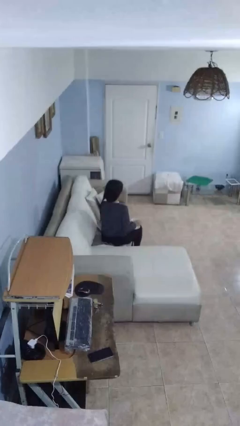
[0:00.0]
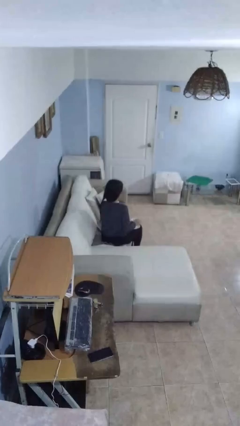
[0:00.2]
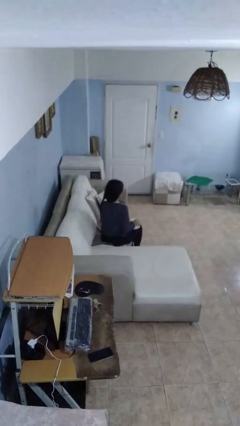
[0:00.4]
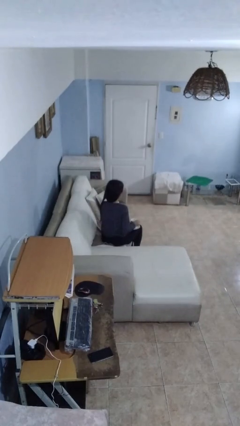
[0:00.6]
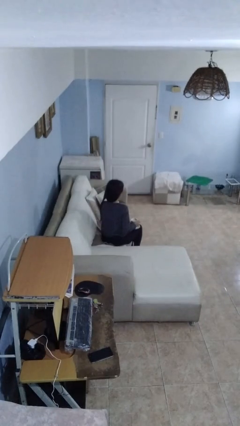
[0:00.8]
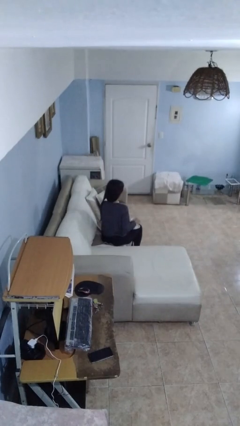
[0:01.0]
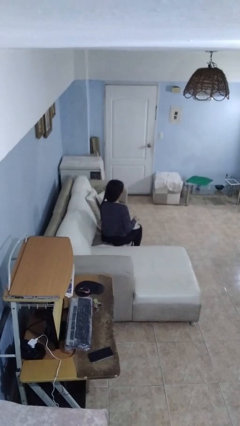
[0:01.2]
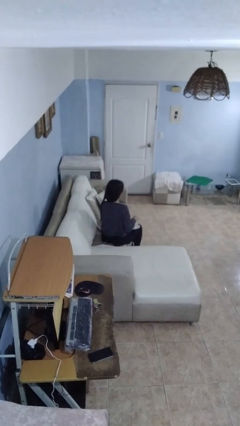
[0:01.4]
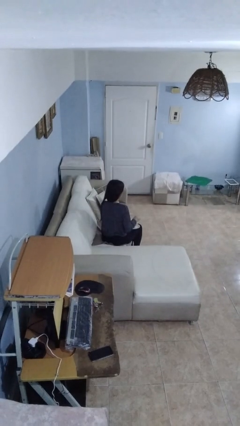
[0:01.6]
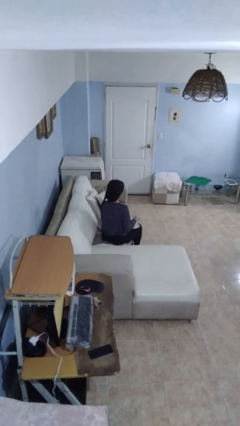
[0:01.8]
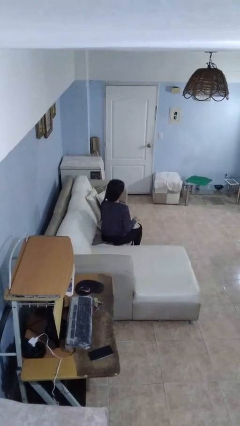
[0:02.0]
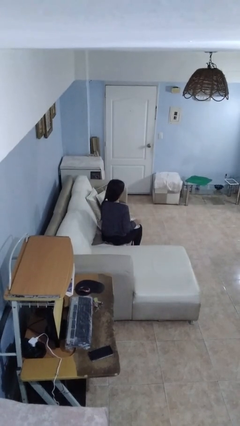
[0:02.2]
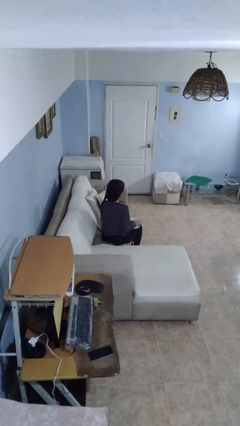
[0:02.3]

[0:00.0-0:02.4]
person stirs mug

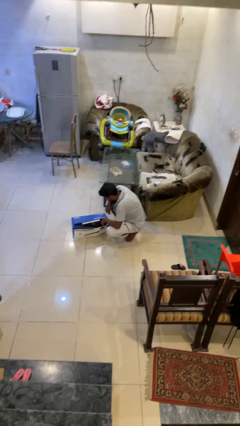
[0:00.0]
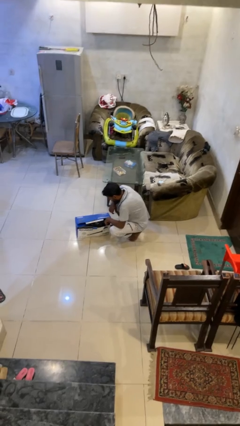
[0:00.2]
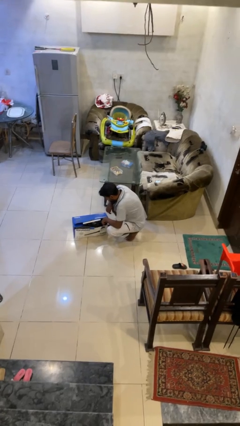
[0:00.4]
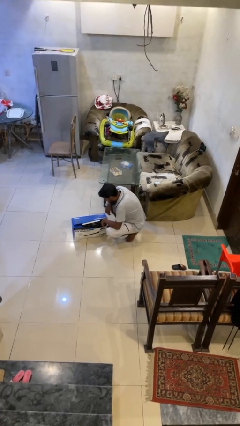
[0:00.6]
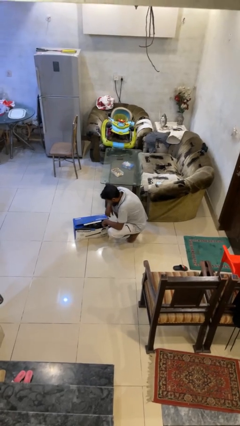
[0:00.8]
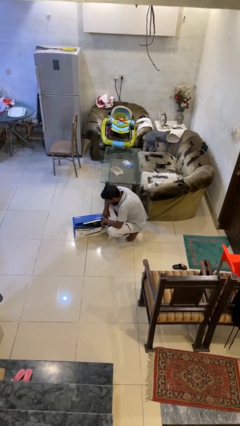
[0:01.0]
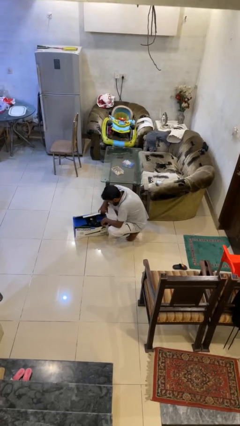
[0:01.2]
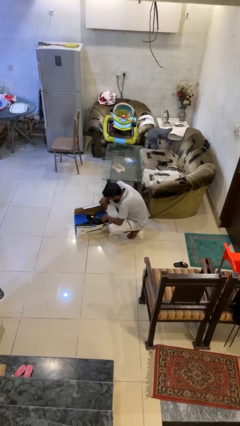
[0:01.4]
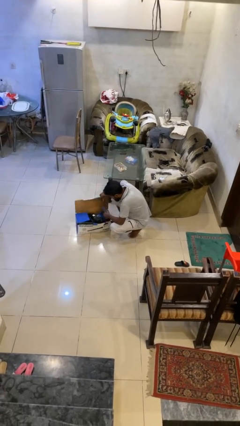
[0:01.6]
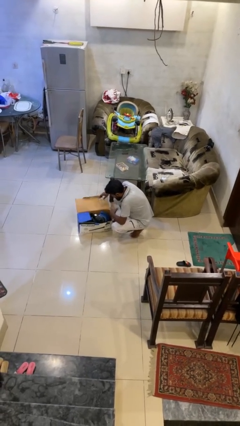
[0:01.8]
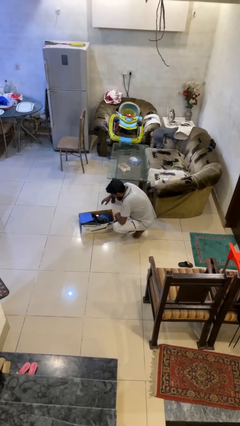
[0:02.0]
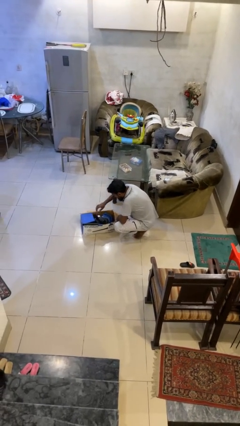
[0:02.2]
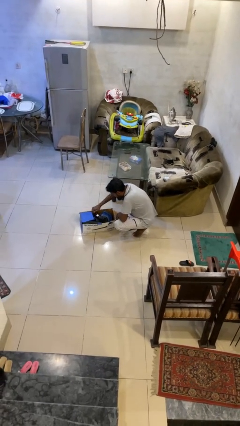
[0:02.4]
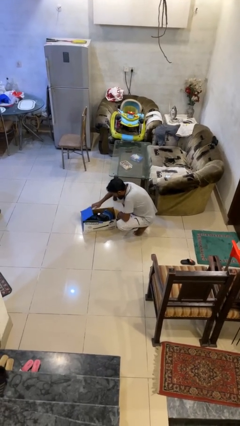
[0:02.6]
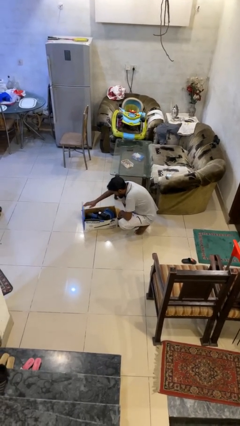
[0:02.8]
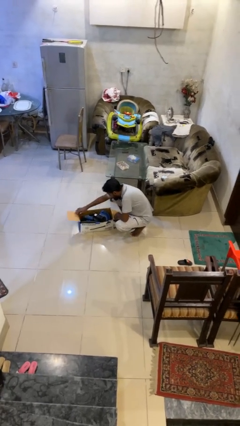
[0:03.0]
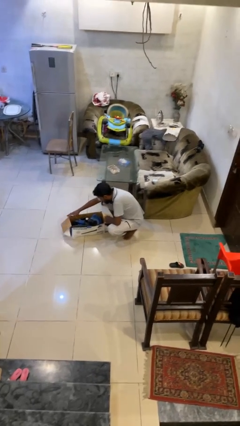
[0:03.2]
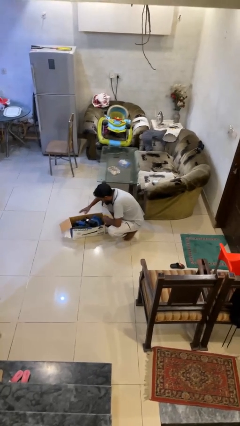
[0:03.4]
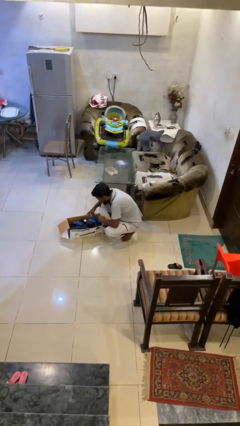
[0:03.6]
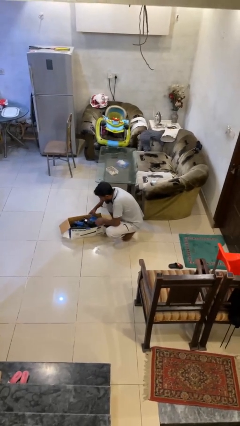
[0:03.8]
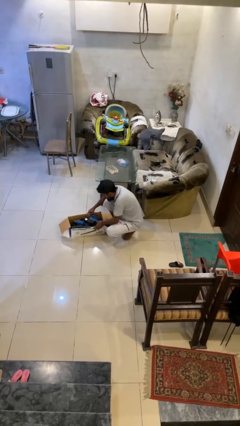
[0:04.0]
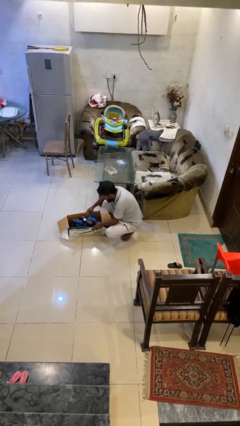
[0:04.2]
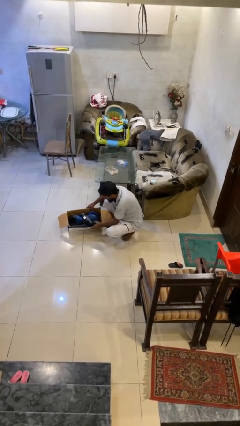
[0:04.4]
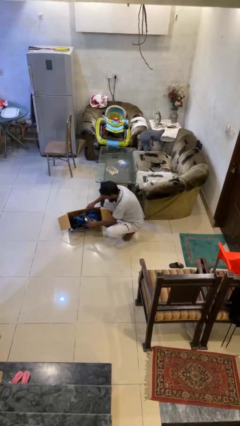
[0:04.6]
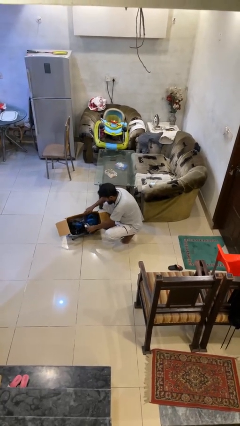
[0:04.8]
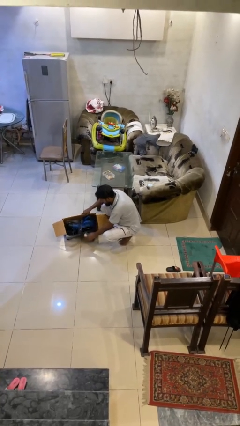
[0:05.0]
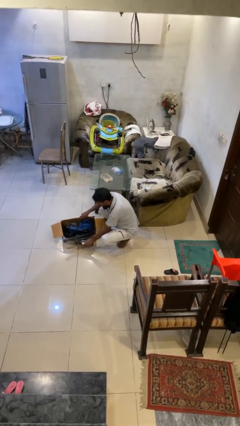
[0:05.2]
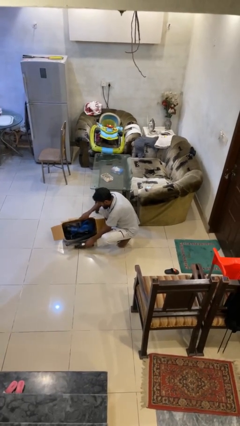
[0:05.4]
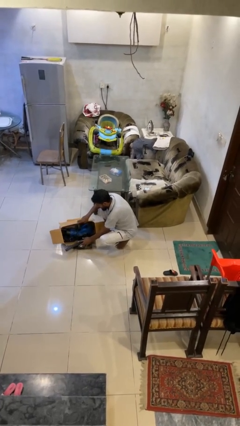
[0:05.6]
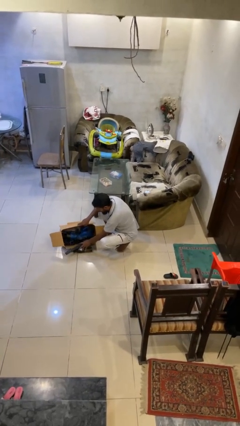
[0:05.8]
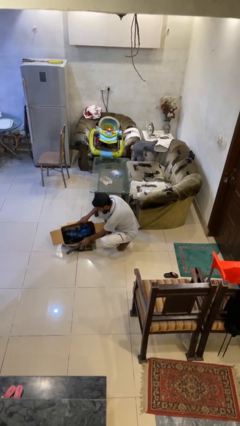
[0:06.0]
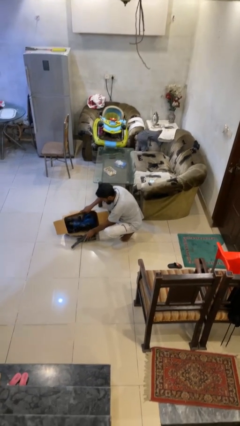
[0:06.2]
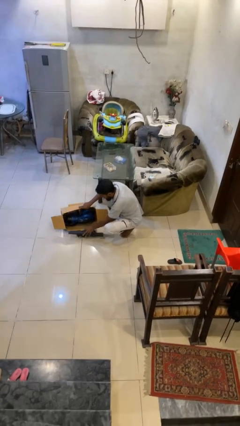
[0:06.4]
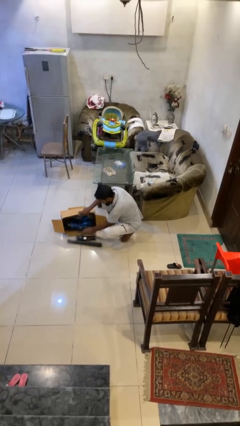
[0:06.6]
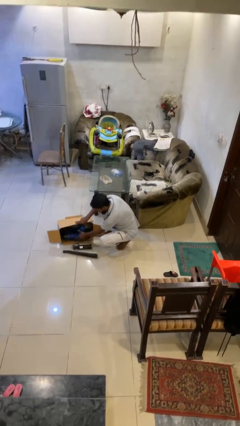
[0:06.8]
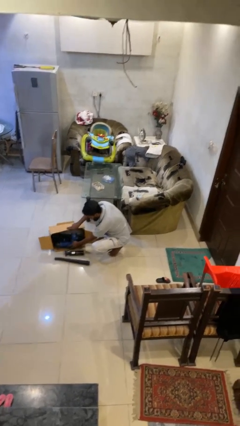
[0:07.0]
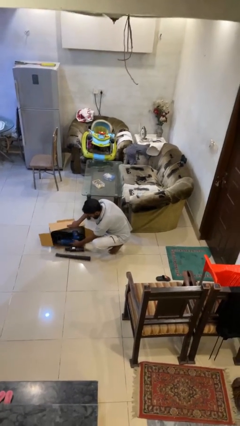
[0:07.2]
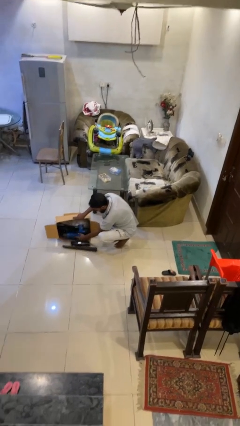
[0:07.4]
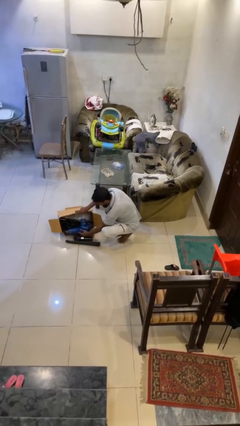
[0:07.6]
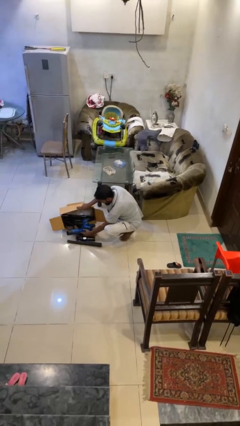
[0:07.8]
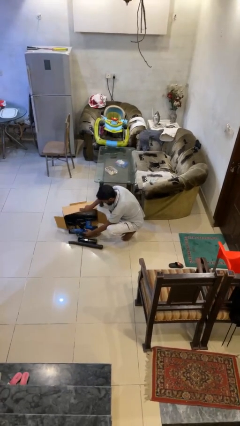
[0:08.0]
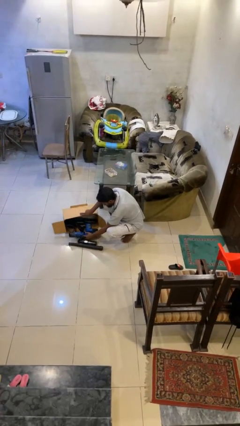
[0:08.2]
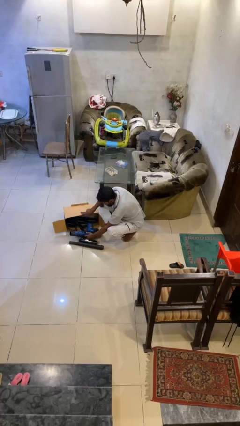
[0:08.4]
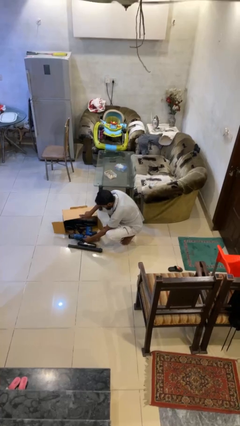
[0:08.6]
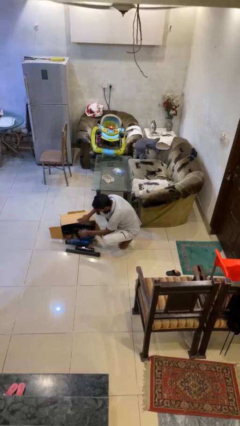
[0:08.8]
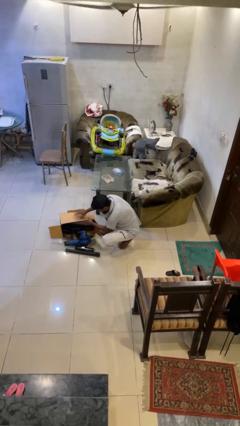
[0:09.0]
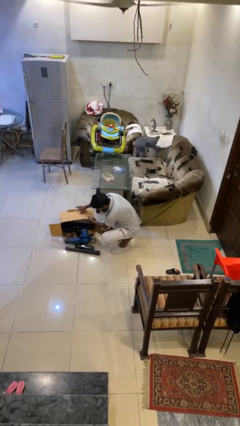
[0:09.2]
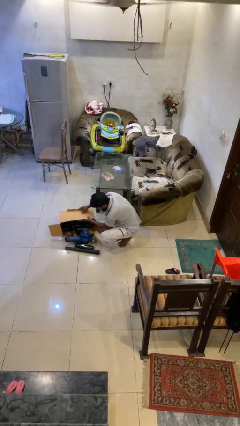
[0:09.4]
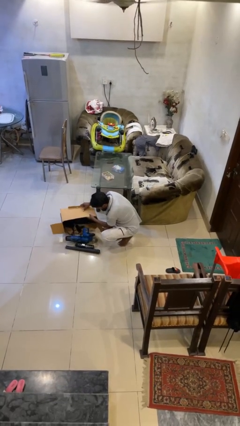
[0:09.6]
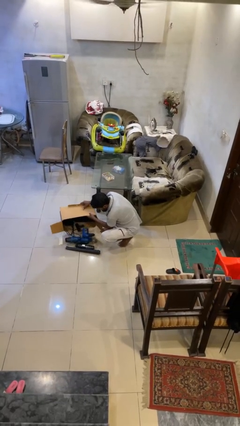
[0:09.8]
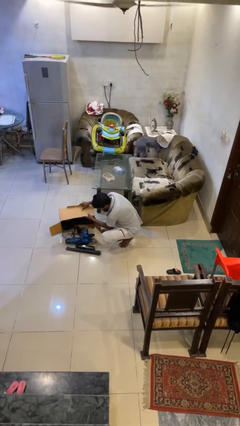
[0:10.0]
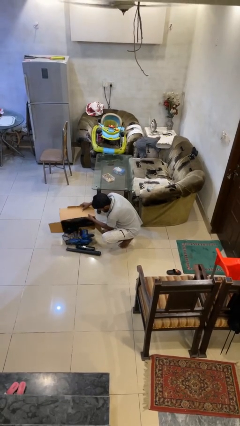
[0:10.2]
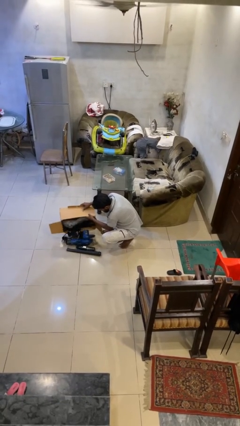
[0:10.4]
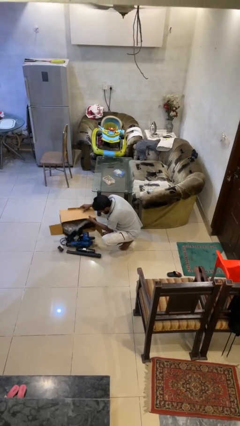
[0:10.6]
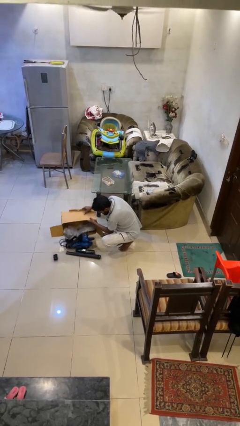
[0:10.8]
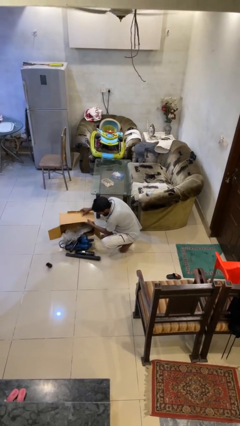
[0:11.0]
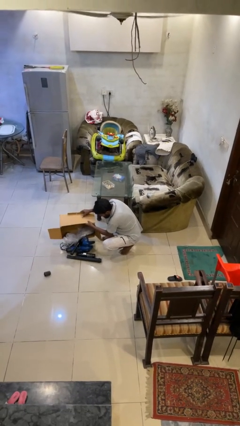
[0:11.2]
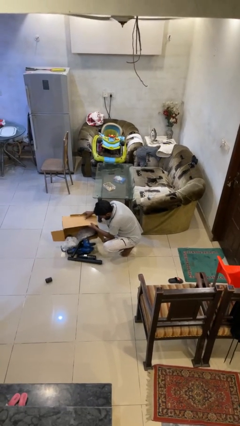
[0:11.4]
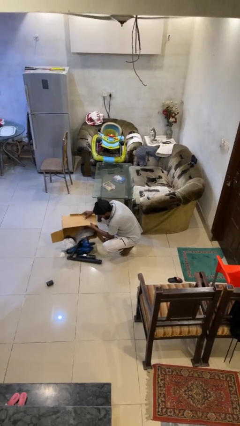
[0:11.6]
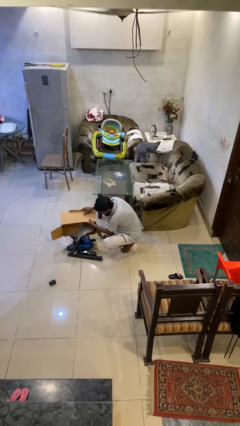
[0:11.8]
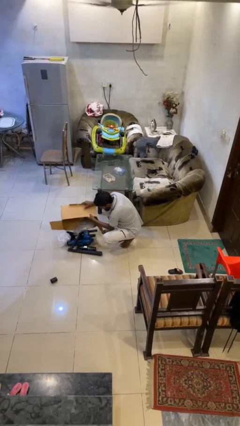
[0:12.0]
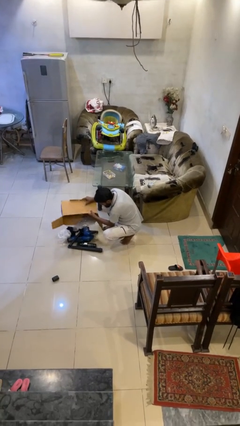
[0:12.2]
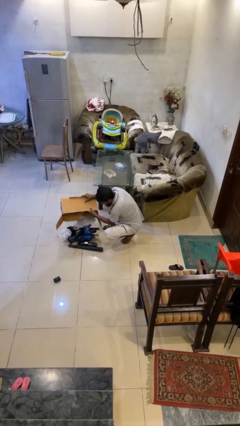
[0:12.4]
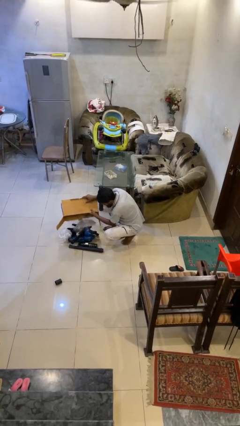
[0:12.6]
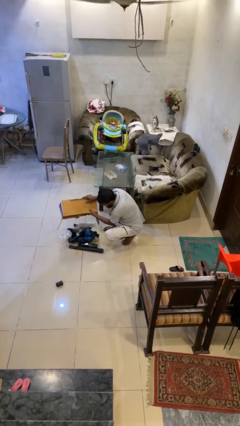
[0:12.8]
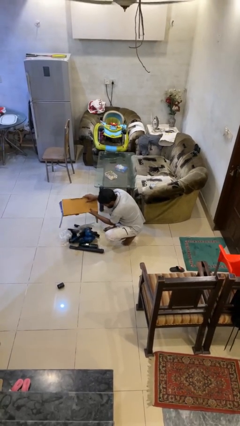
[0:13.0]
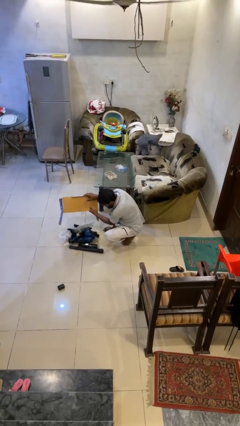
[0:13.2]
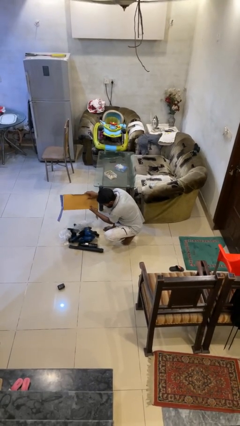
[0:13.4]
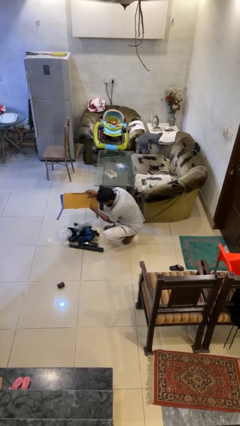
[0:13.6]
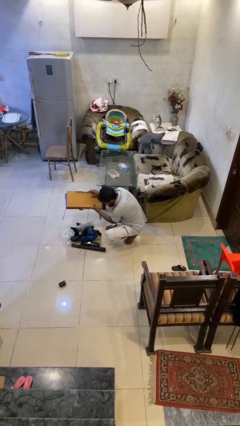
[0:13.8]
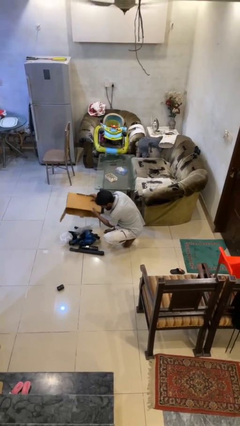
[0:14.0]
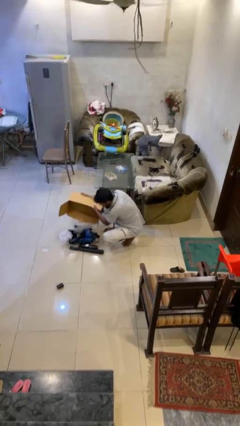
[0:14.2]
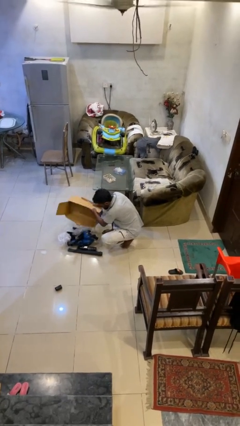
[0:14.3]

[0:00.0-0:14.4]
person unloads box onto floor

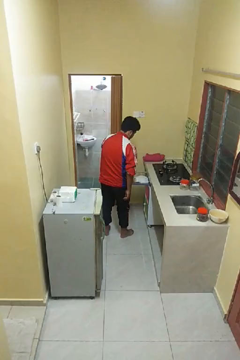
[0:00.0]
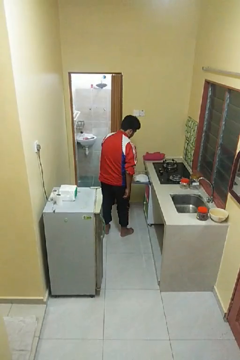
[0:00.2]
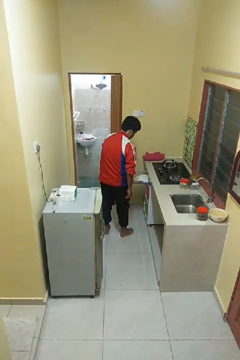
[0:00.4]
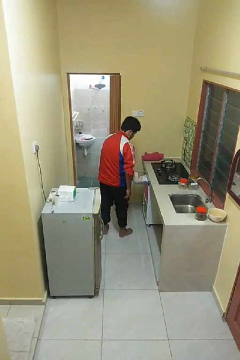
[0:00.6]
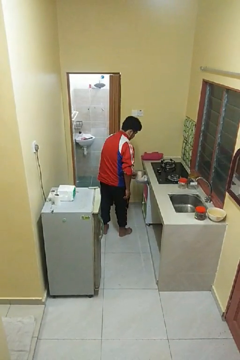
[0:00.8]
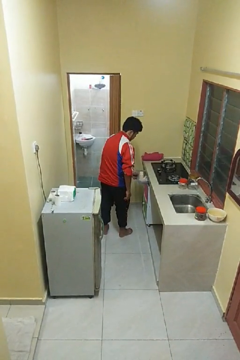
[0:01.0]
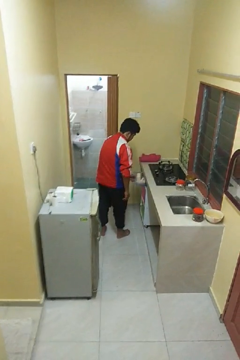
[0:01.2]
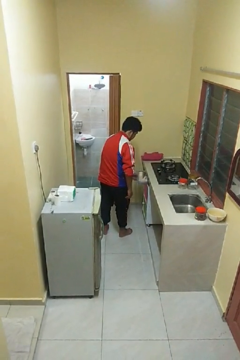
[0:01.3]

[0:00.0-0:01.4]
person closes kitchen drawer
